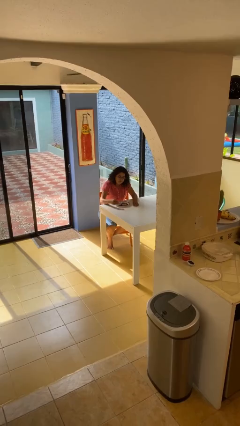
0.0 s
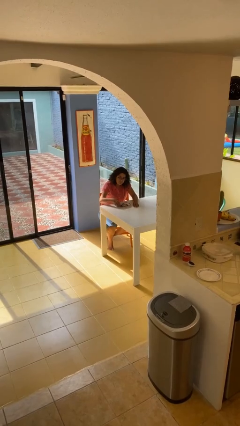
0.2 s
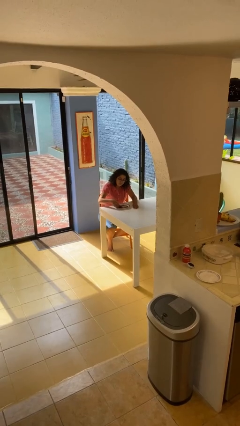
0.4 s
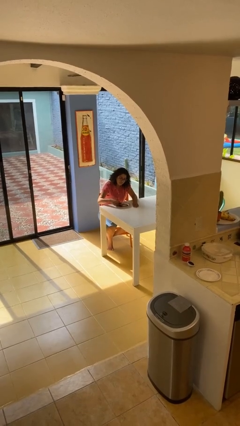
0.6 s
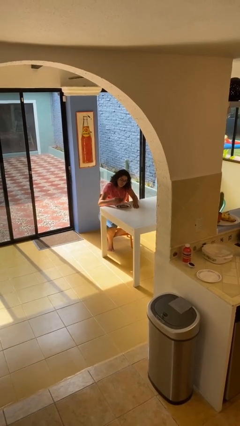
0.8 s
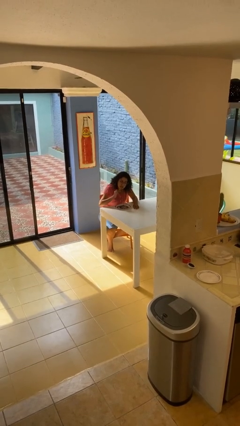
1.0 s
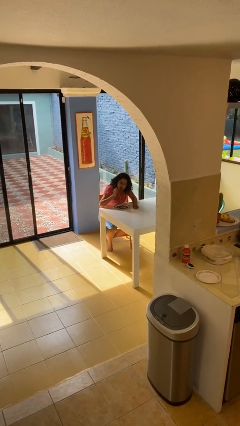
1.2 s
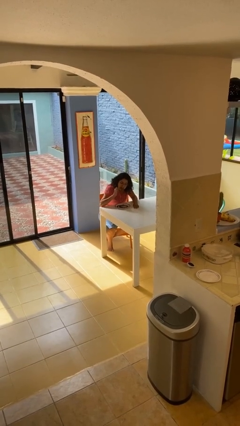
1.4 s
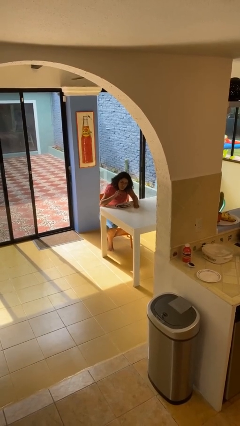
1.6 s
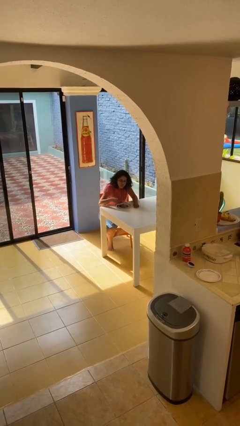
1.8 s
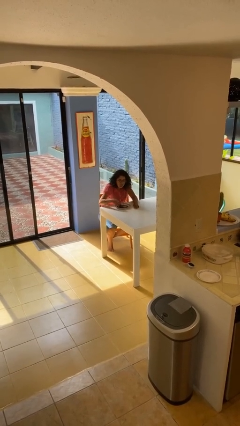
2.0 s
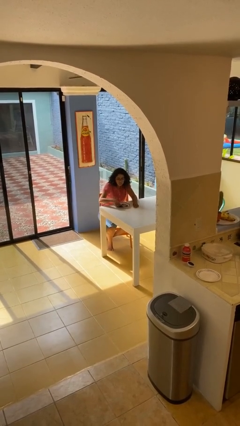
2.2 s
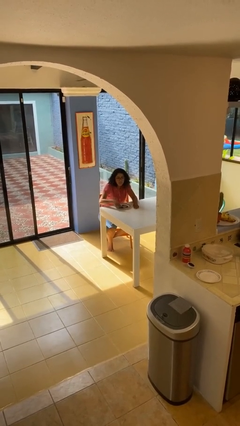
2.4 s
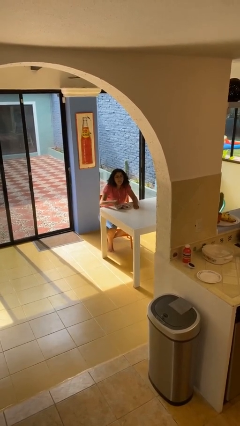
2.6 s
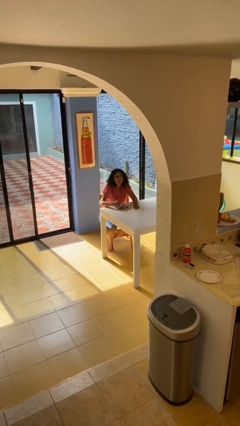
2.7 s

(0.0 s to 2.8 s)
person eats with hands

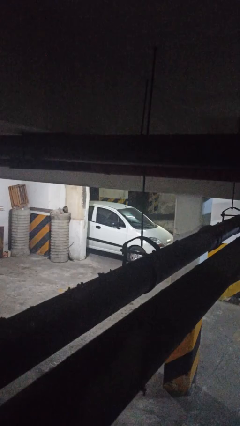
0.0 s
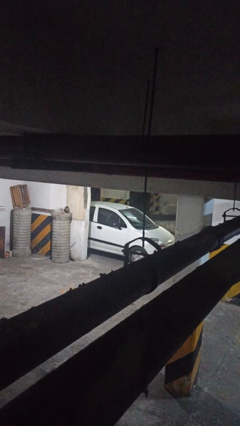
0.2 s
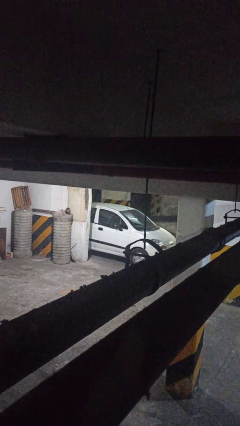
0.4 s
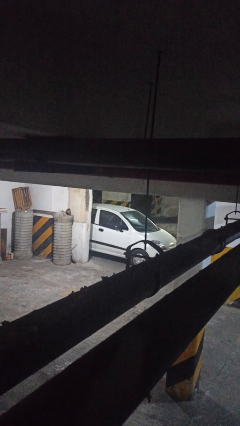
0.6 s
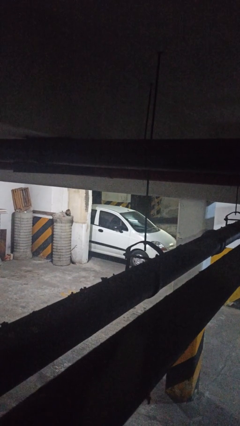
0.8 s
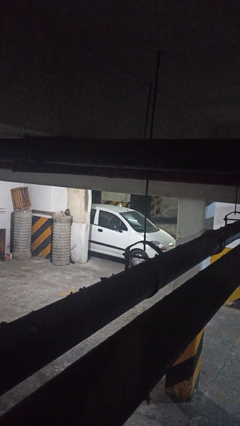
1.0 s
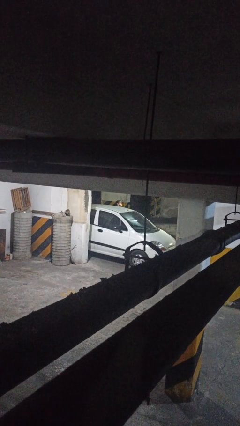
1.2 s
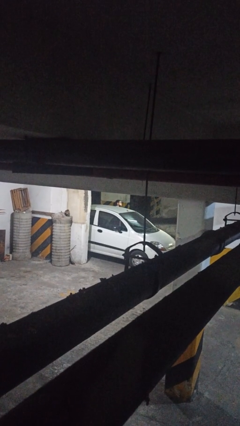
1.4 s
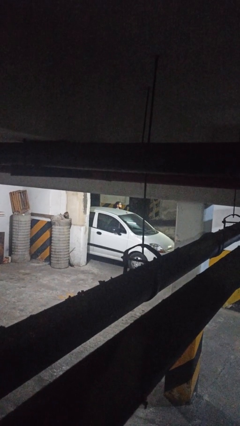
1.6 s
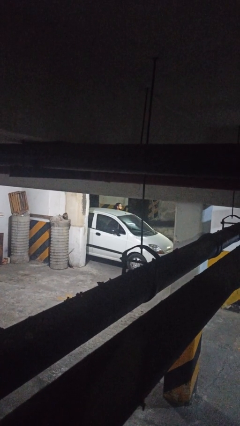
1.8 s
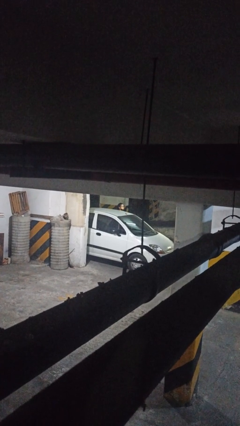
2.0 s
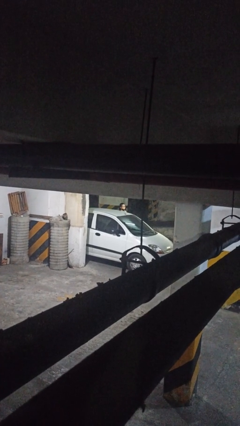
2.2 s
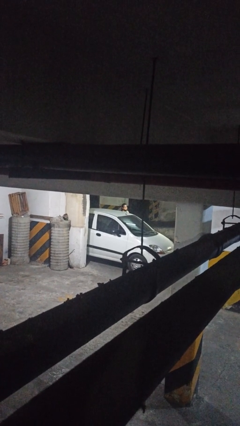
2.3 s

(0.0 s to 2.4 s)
person exits car

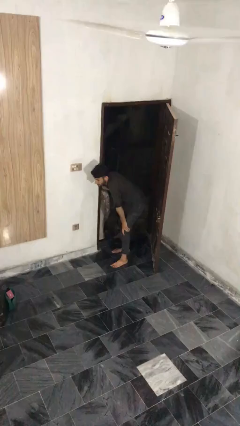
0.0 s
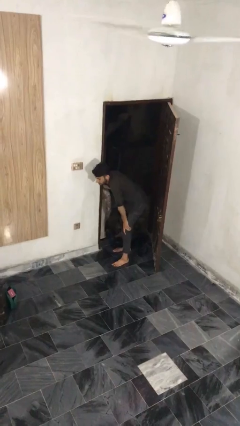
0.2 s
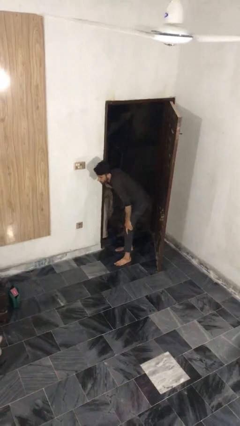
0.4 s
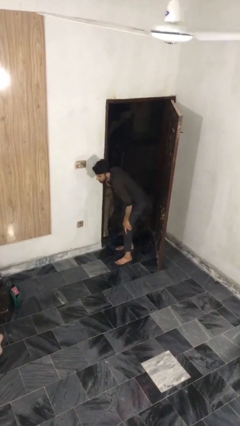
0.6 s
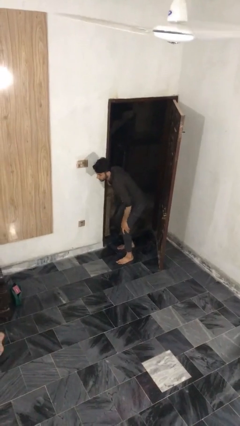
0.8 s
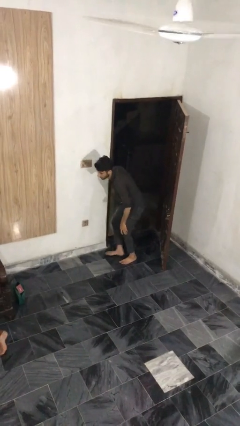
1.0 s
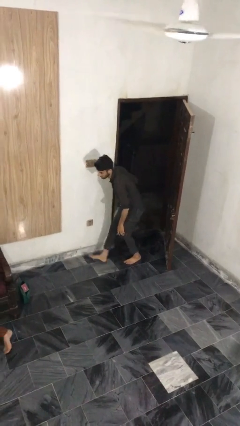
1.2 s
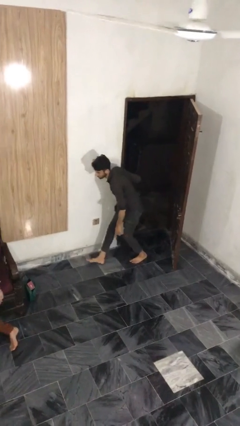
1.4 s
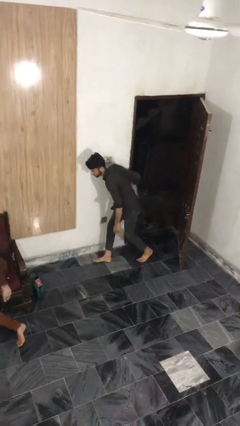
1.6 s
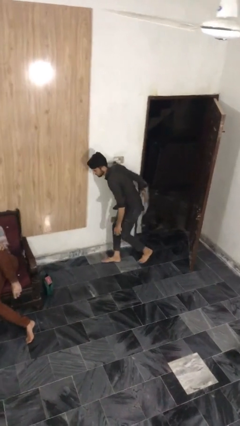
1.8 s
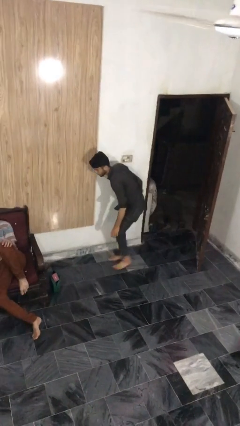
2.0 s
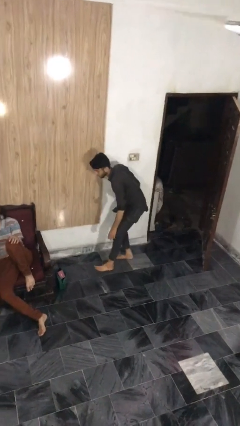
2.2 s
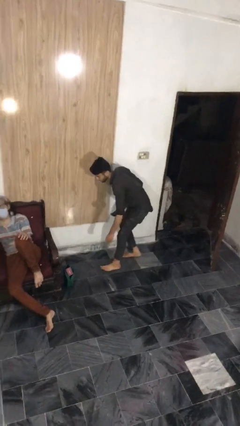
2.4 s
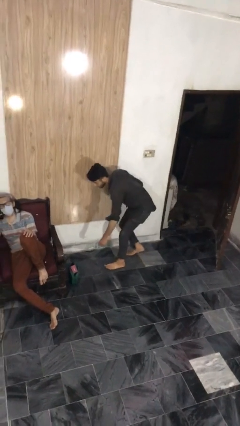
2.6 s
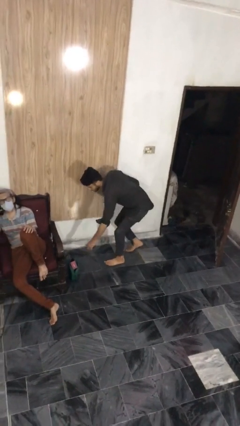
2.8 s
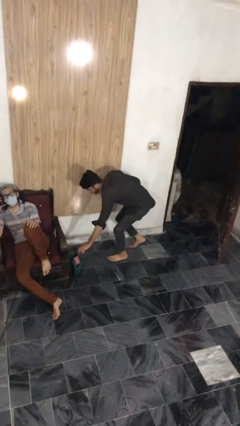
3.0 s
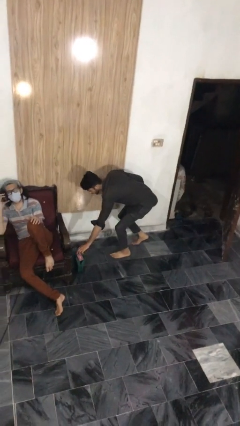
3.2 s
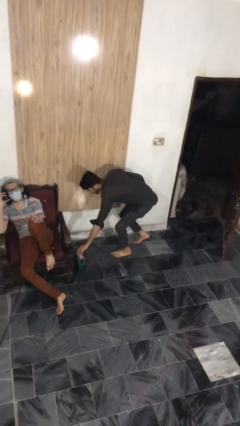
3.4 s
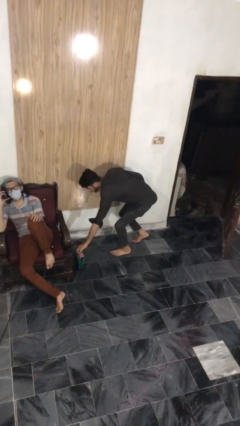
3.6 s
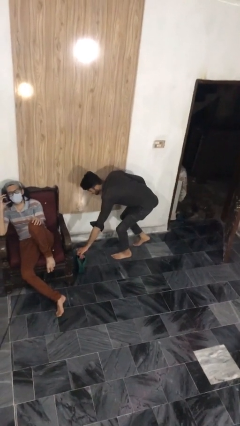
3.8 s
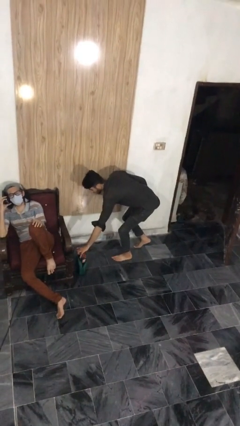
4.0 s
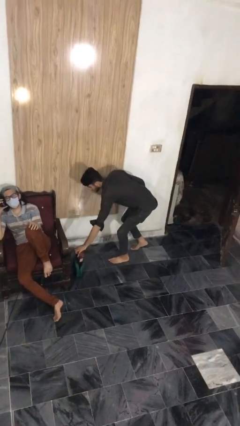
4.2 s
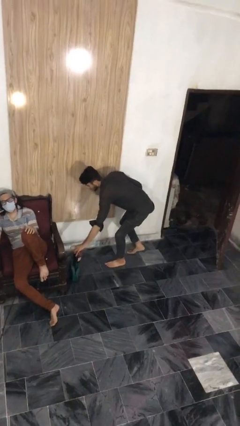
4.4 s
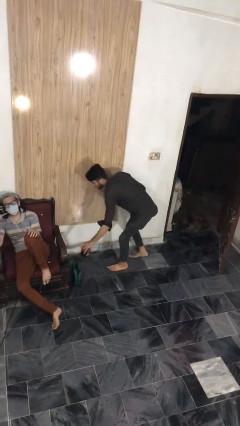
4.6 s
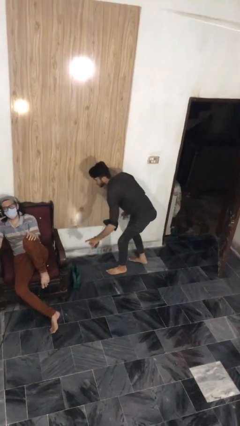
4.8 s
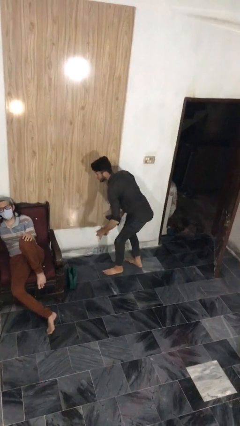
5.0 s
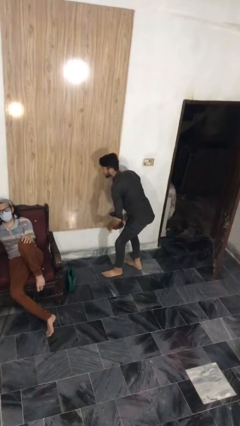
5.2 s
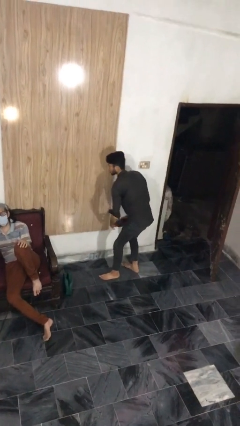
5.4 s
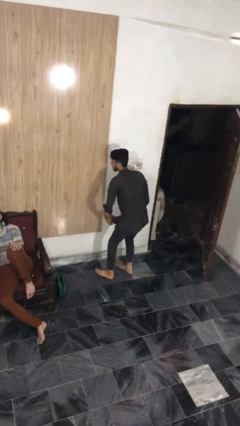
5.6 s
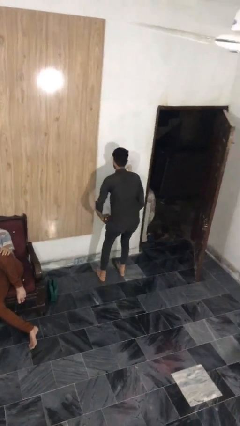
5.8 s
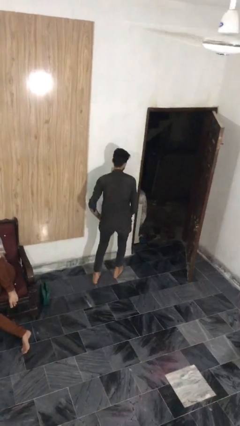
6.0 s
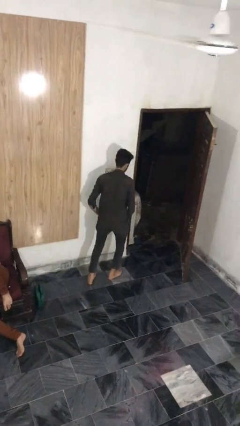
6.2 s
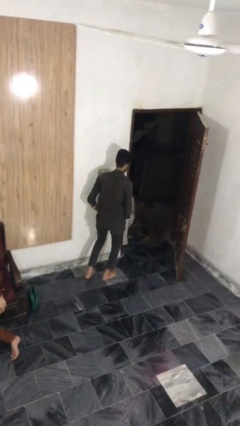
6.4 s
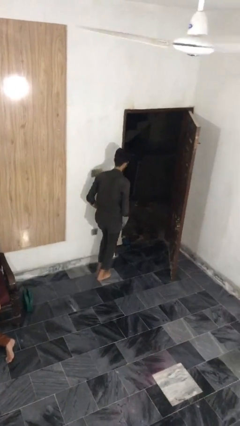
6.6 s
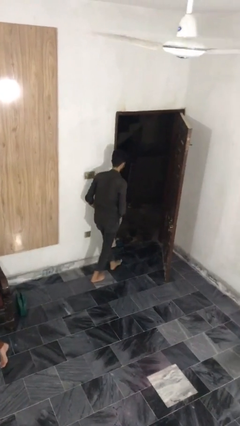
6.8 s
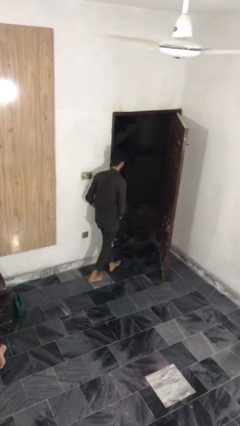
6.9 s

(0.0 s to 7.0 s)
person steals object from person

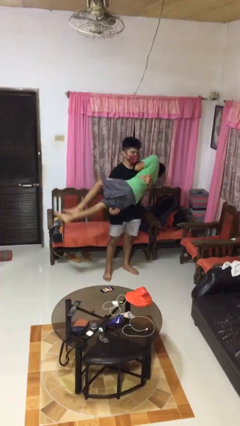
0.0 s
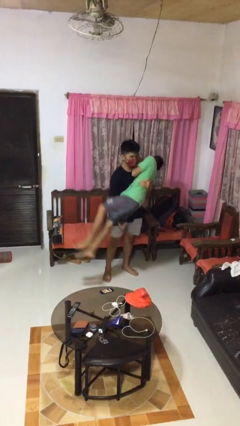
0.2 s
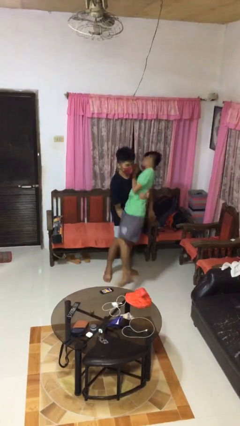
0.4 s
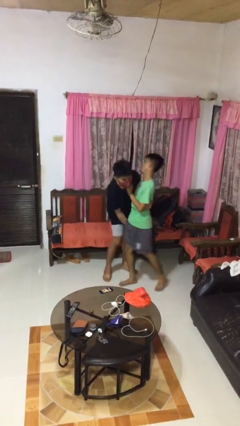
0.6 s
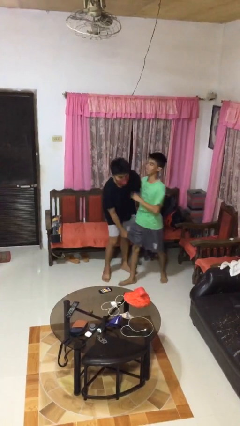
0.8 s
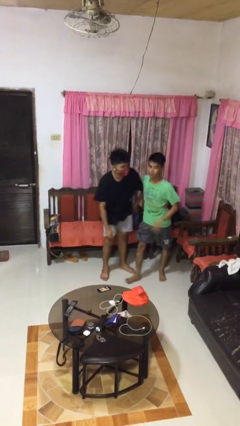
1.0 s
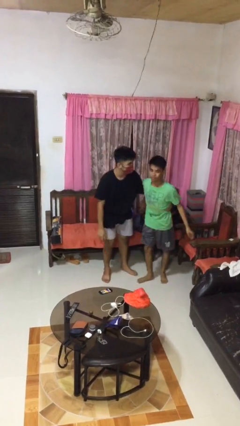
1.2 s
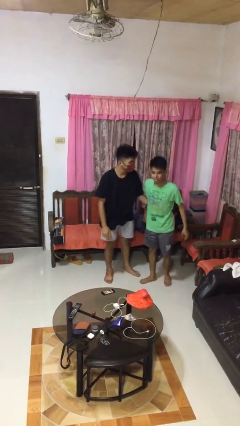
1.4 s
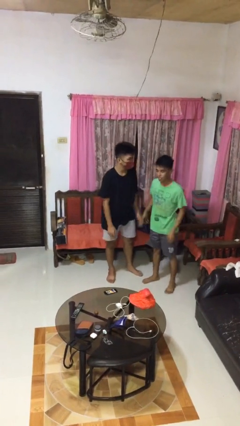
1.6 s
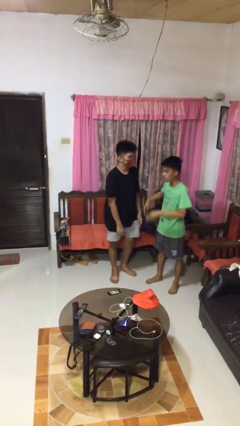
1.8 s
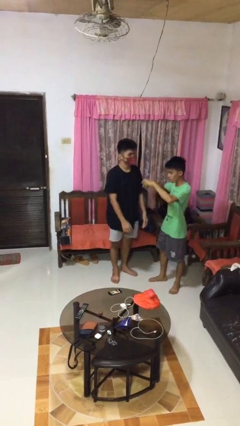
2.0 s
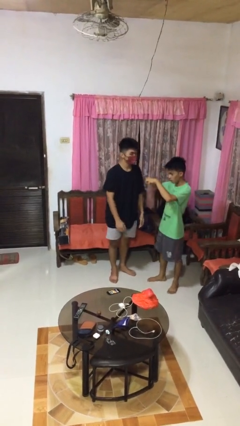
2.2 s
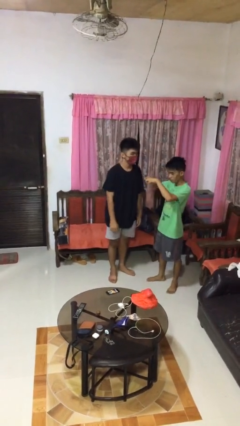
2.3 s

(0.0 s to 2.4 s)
person puts down person

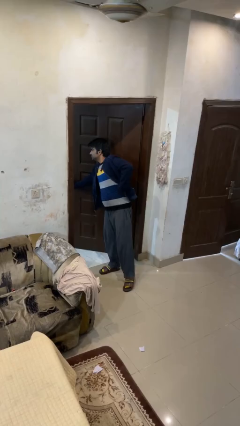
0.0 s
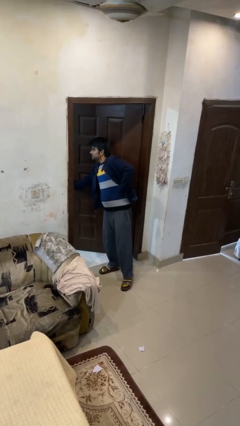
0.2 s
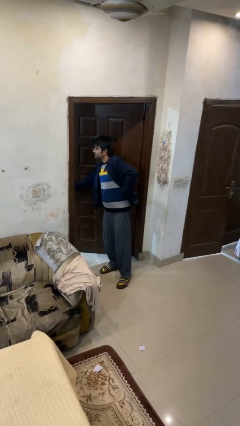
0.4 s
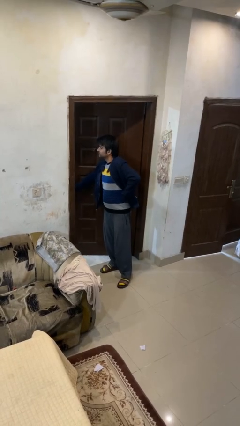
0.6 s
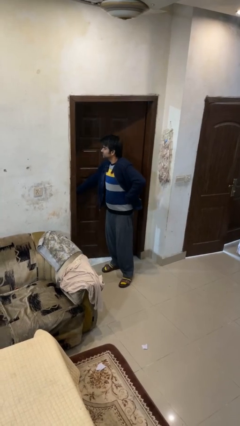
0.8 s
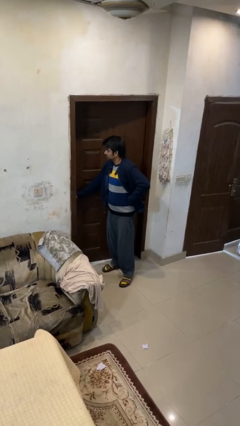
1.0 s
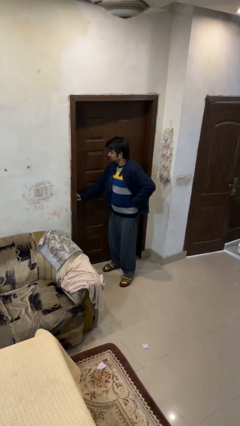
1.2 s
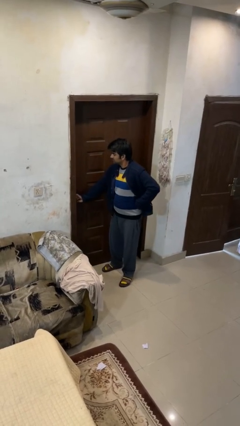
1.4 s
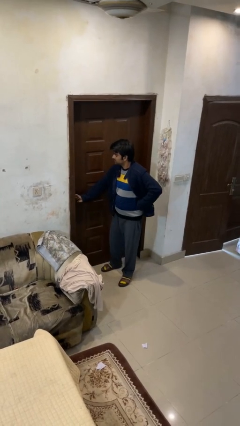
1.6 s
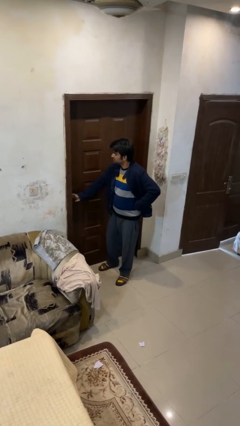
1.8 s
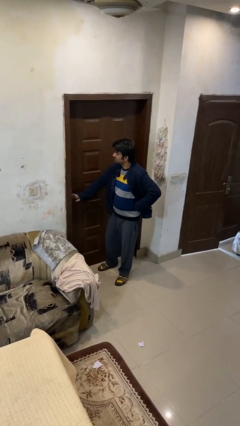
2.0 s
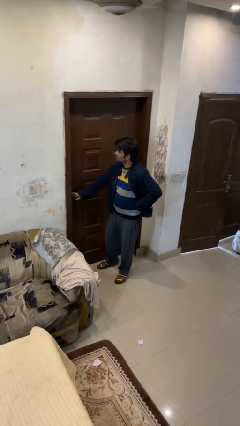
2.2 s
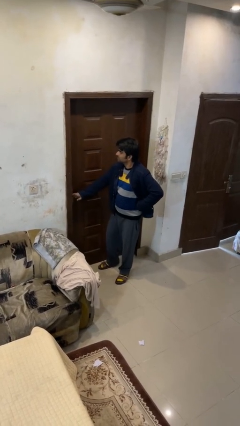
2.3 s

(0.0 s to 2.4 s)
person closes facility door

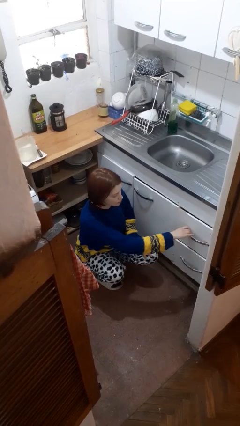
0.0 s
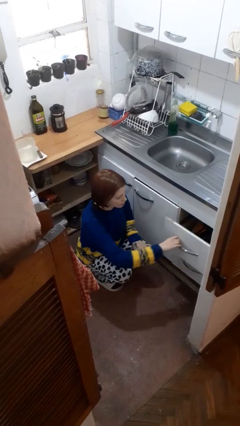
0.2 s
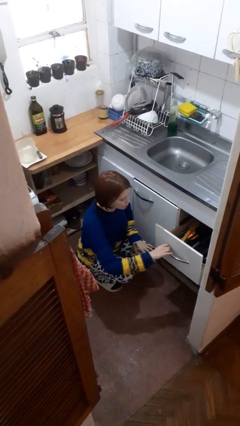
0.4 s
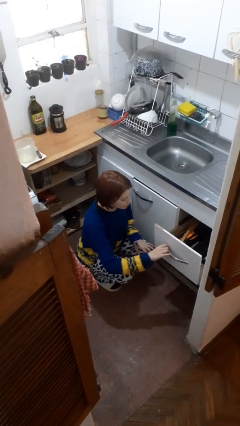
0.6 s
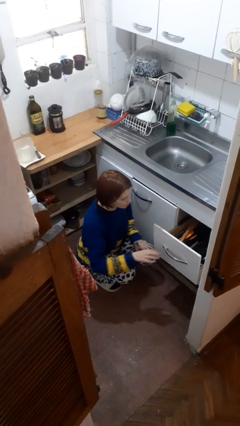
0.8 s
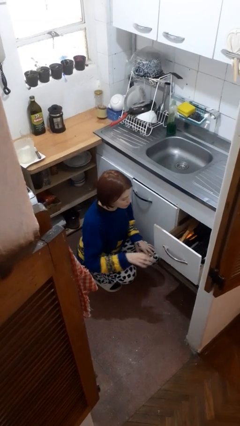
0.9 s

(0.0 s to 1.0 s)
person opens kitchen drawer
